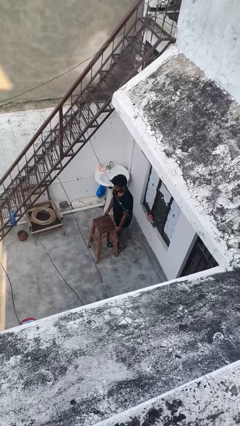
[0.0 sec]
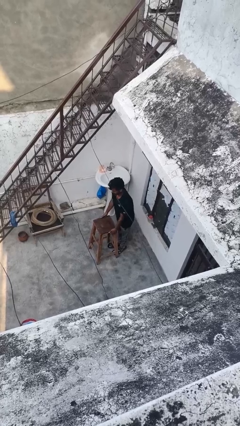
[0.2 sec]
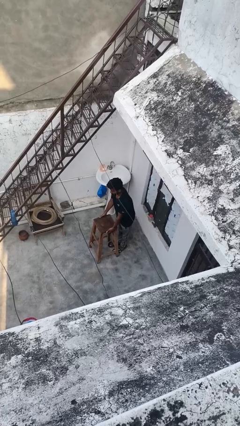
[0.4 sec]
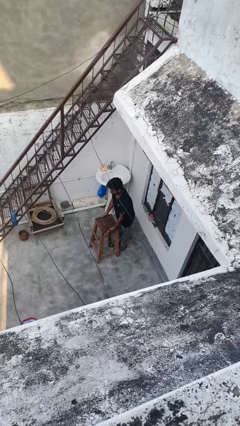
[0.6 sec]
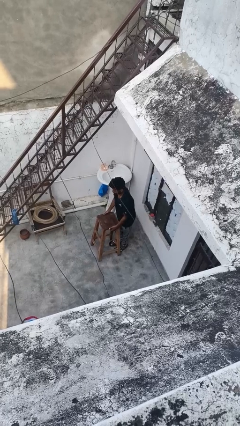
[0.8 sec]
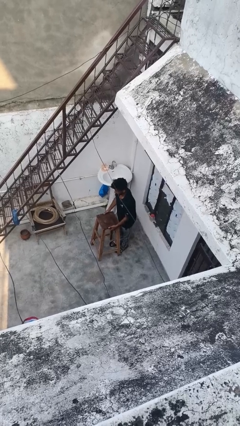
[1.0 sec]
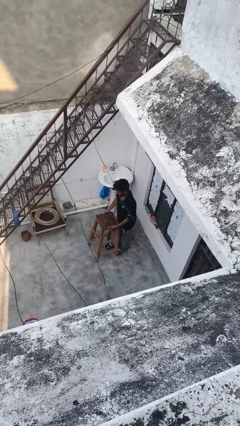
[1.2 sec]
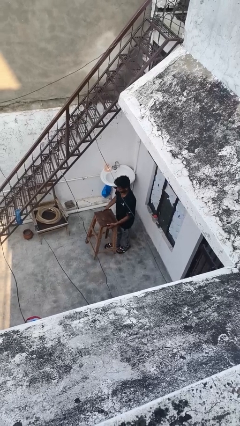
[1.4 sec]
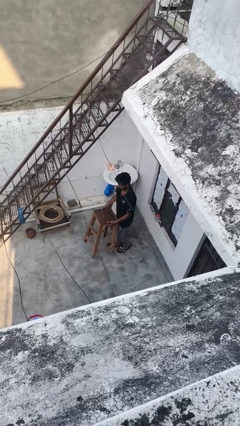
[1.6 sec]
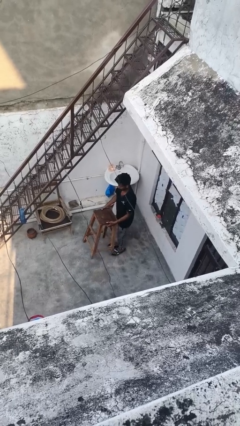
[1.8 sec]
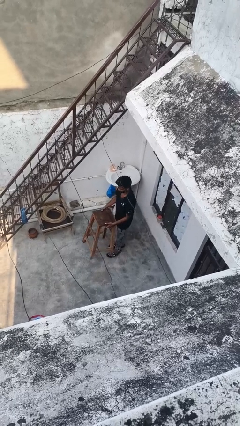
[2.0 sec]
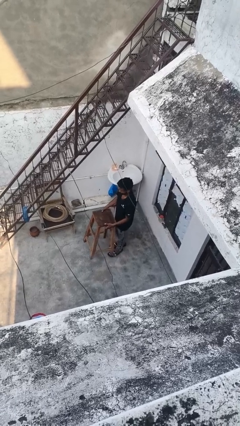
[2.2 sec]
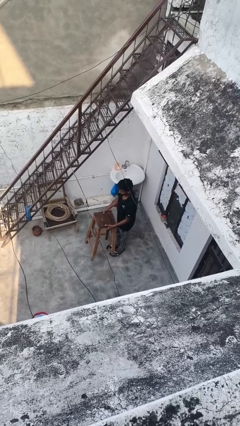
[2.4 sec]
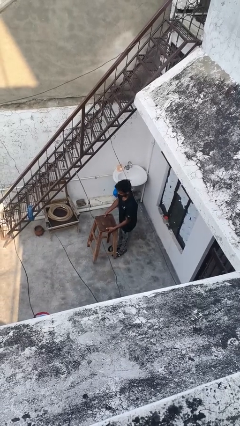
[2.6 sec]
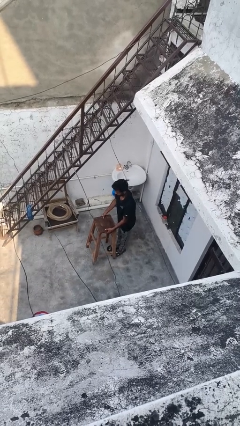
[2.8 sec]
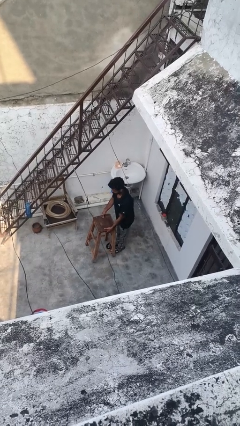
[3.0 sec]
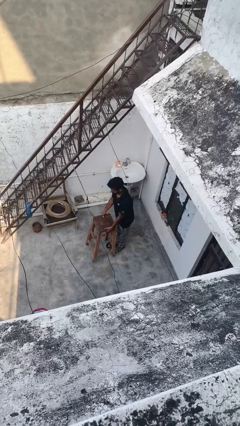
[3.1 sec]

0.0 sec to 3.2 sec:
person carries furniture

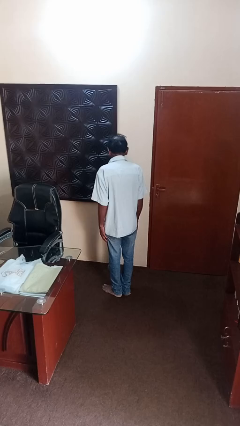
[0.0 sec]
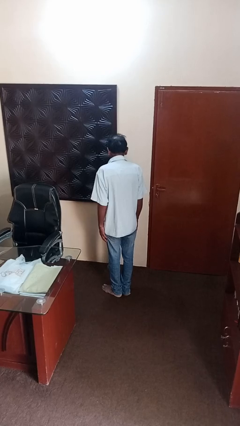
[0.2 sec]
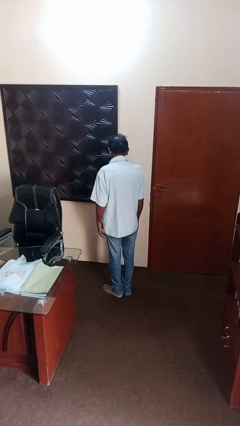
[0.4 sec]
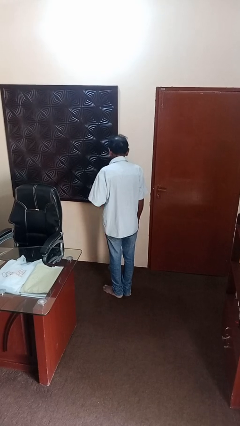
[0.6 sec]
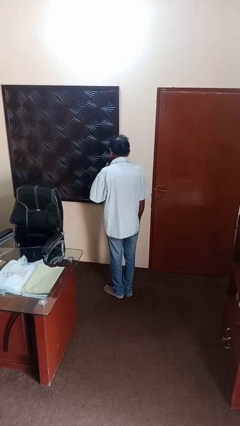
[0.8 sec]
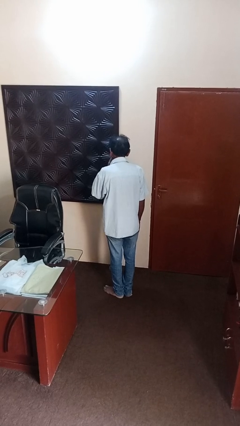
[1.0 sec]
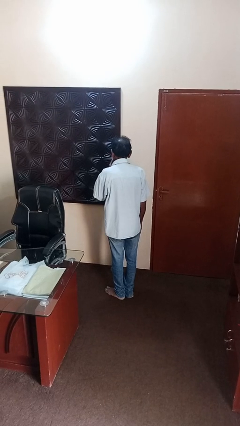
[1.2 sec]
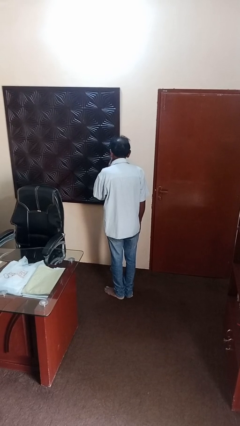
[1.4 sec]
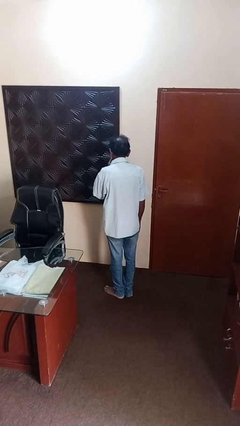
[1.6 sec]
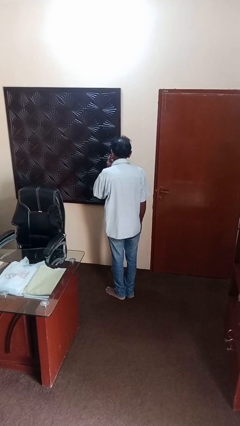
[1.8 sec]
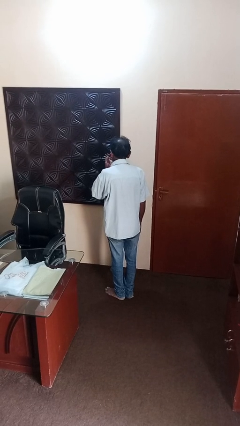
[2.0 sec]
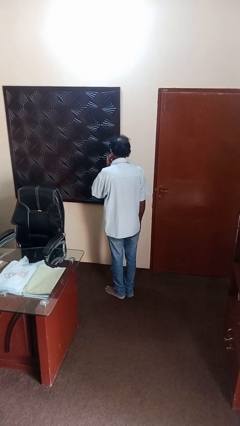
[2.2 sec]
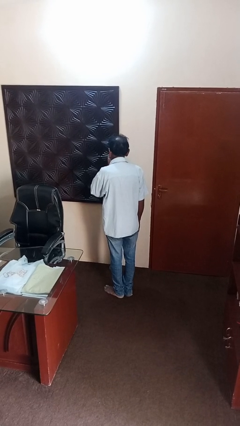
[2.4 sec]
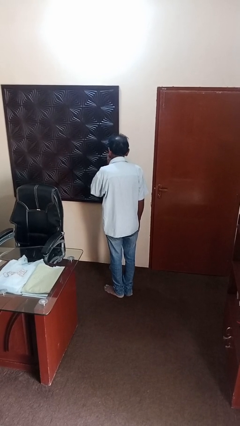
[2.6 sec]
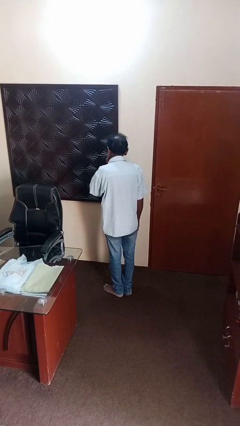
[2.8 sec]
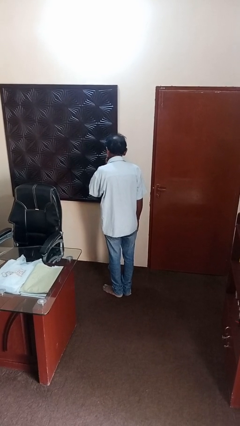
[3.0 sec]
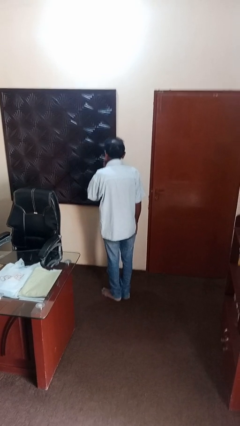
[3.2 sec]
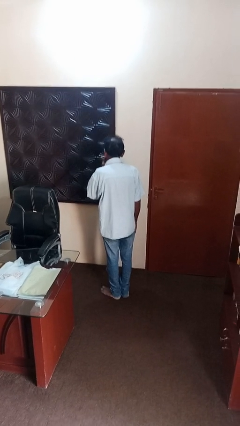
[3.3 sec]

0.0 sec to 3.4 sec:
person licks fingers

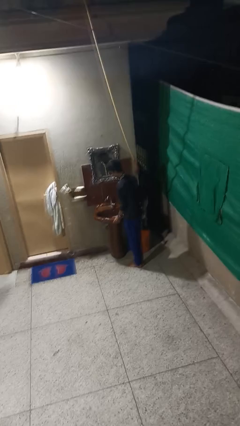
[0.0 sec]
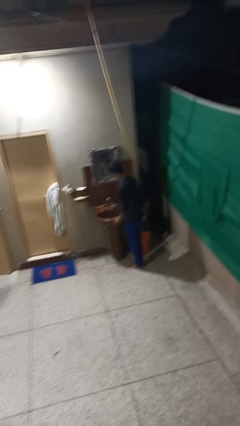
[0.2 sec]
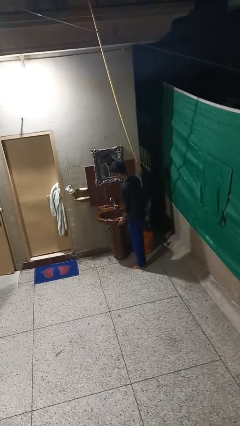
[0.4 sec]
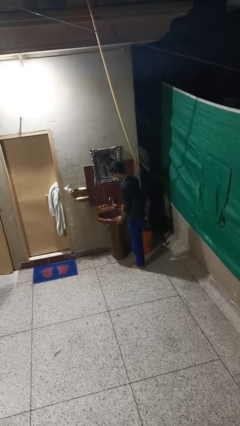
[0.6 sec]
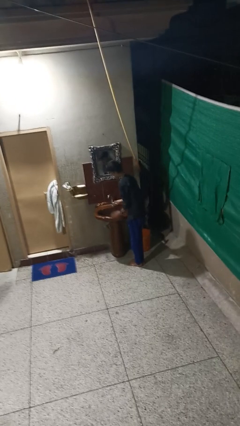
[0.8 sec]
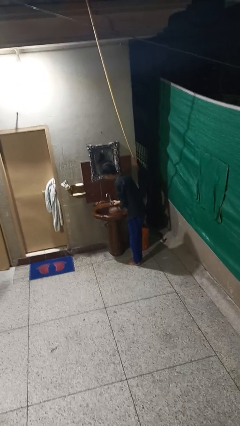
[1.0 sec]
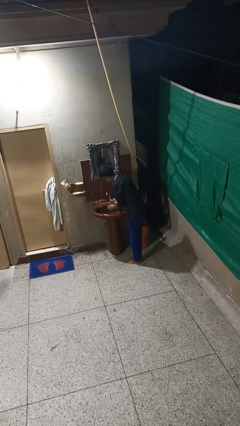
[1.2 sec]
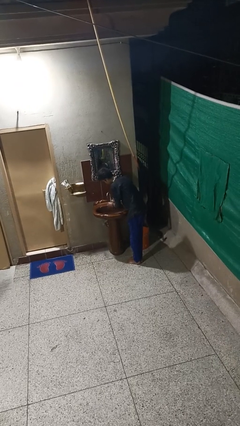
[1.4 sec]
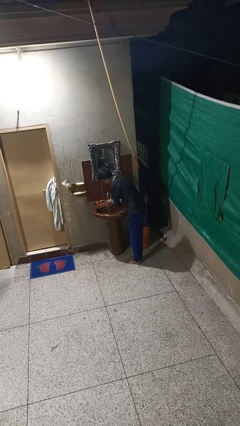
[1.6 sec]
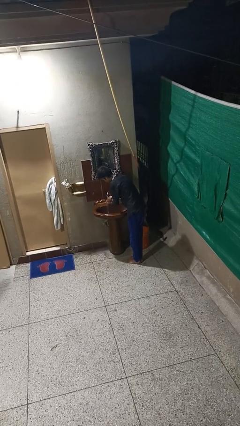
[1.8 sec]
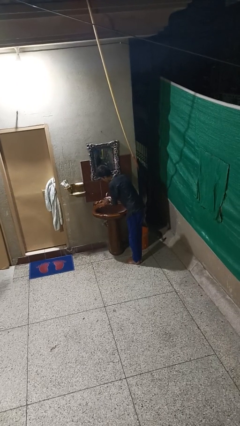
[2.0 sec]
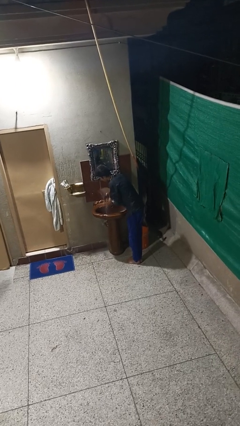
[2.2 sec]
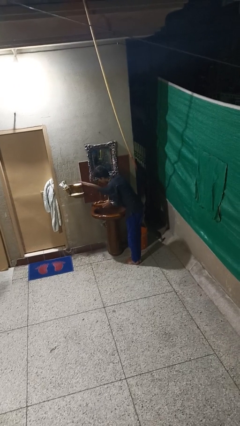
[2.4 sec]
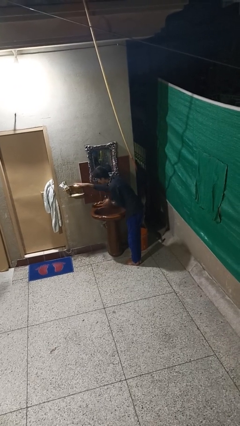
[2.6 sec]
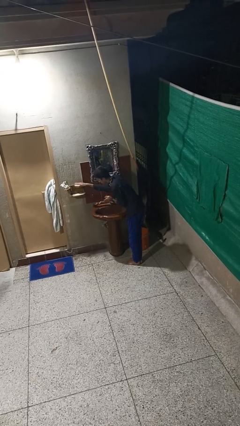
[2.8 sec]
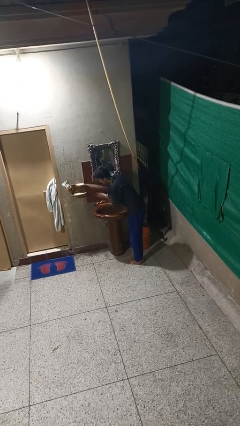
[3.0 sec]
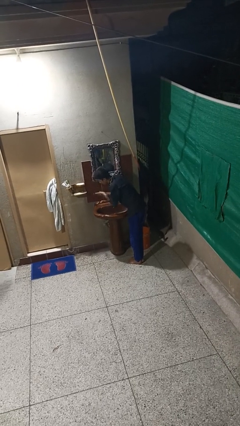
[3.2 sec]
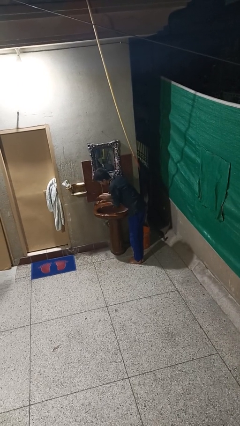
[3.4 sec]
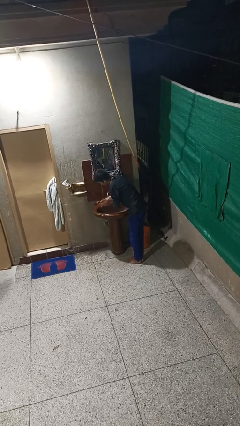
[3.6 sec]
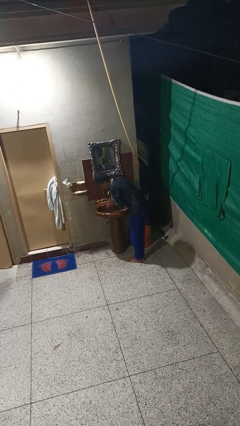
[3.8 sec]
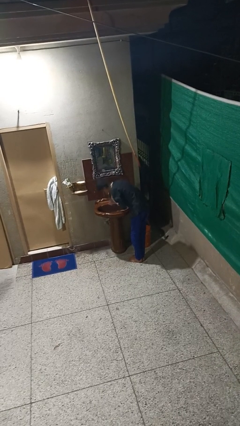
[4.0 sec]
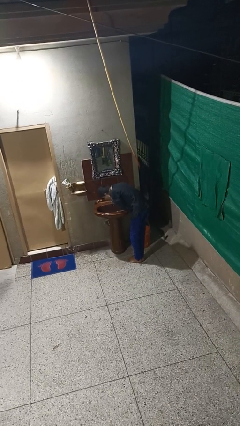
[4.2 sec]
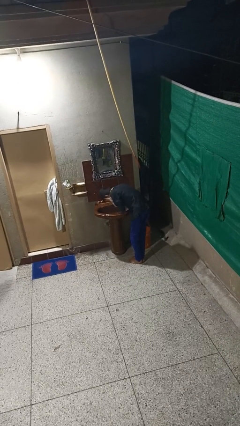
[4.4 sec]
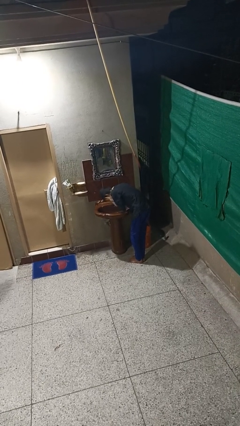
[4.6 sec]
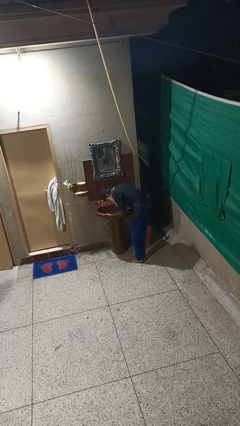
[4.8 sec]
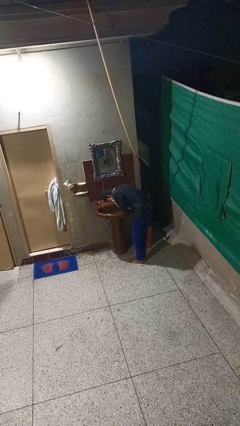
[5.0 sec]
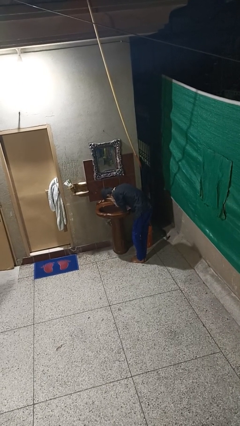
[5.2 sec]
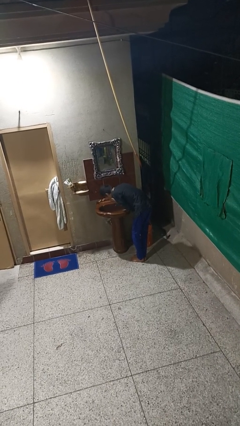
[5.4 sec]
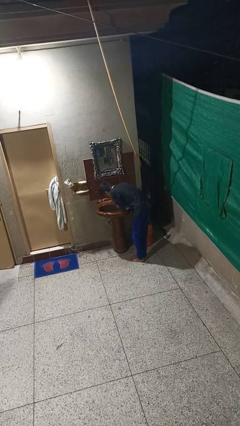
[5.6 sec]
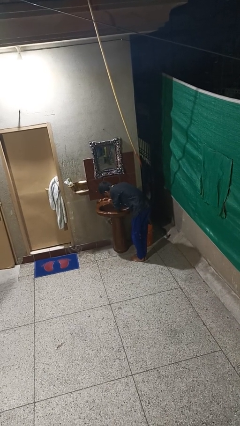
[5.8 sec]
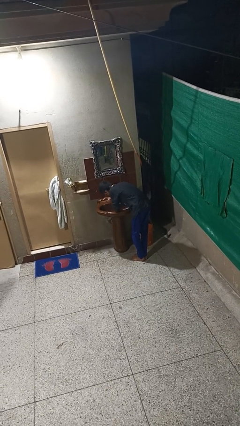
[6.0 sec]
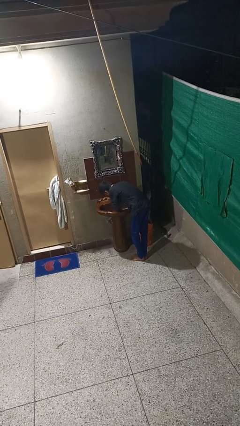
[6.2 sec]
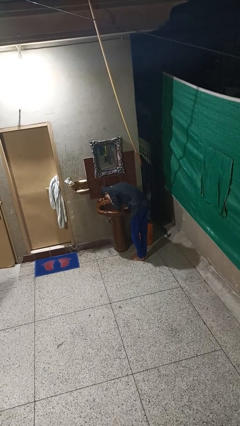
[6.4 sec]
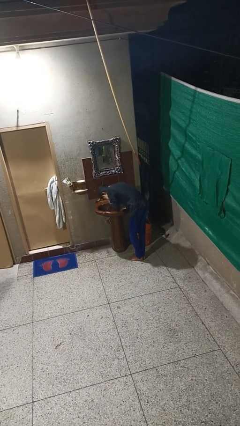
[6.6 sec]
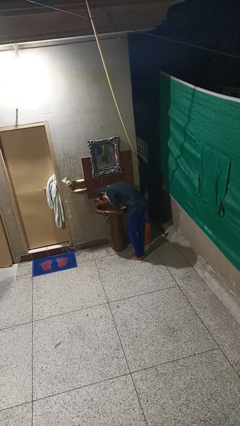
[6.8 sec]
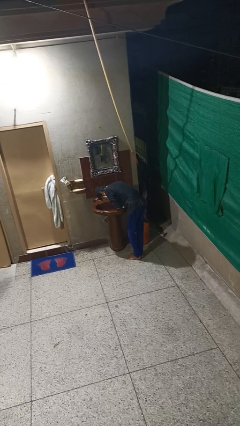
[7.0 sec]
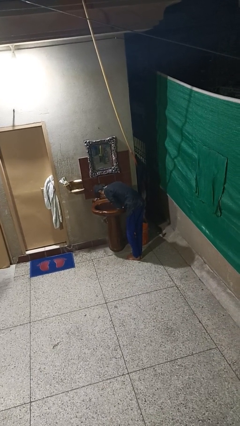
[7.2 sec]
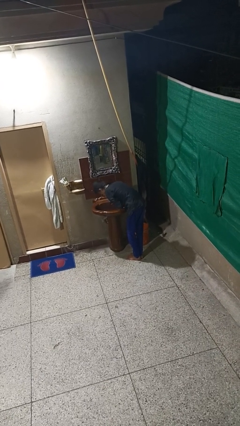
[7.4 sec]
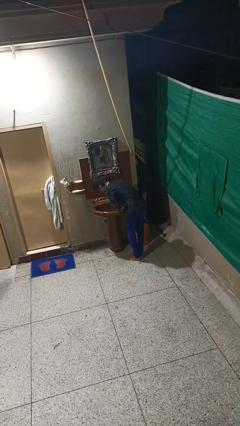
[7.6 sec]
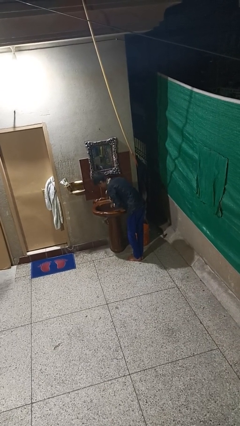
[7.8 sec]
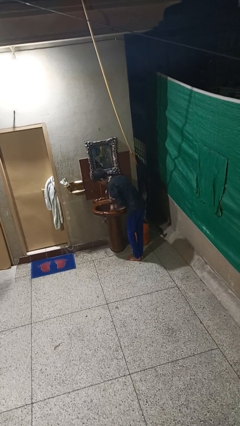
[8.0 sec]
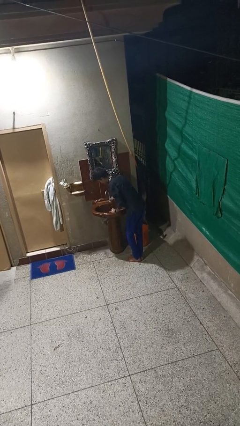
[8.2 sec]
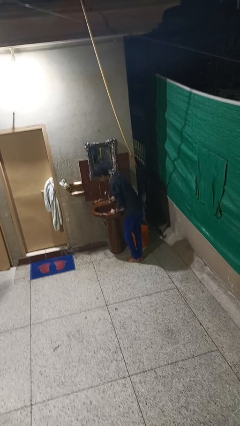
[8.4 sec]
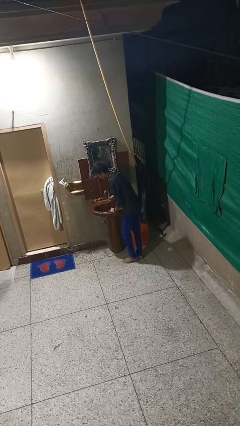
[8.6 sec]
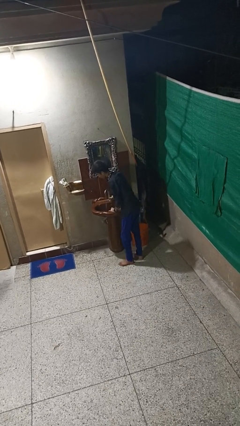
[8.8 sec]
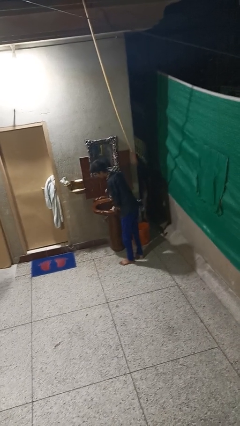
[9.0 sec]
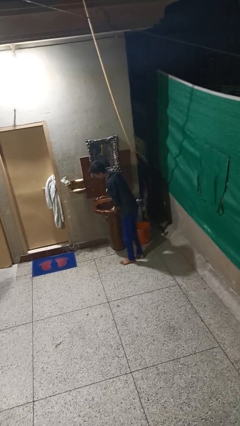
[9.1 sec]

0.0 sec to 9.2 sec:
person washes face

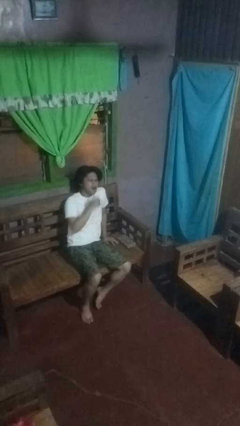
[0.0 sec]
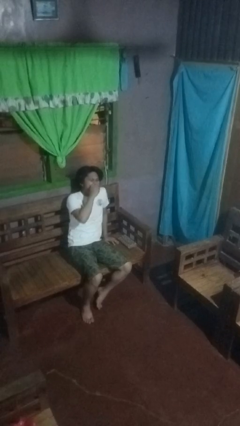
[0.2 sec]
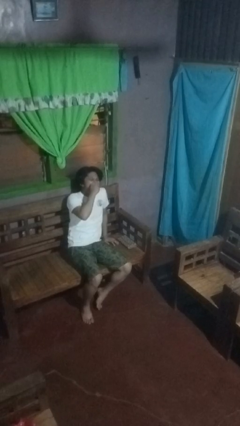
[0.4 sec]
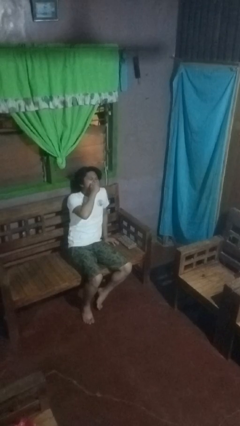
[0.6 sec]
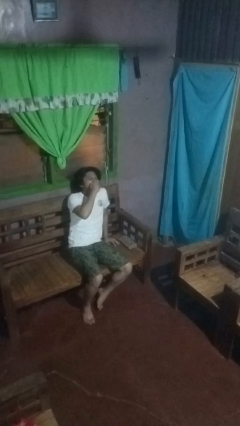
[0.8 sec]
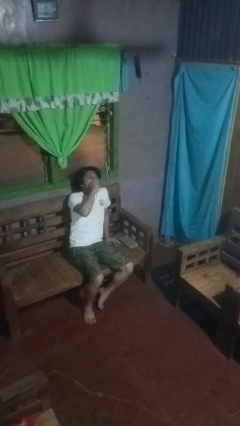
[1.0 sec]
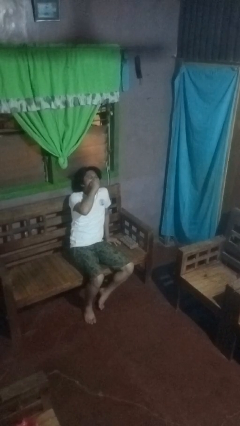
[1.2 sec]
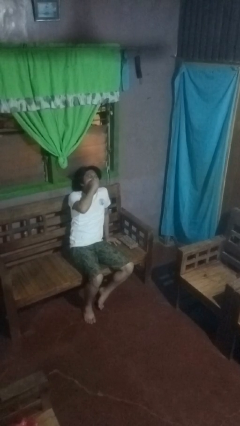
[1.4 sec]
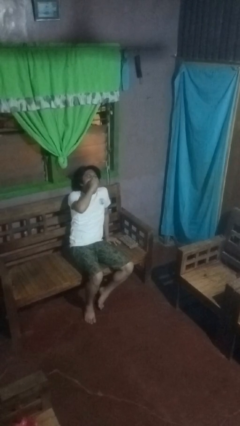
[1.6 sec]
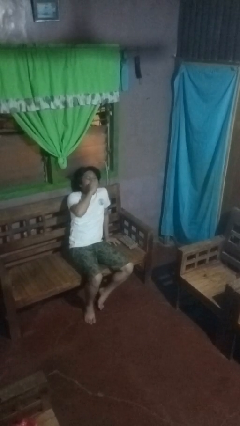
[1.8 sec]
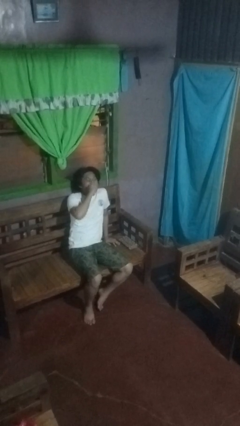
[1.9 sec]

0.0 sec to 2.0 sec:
person yawns
